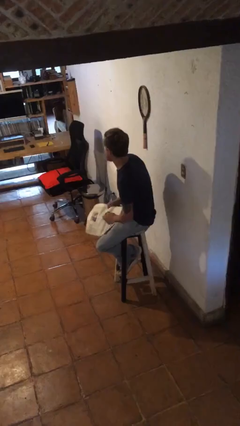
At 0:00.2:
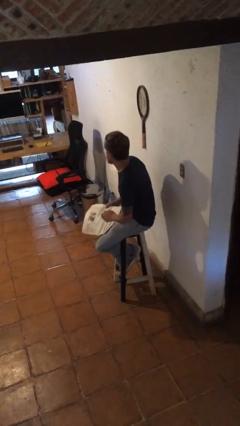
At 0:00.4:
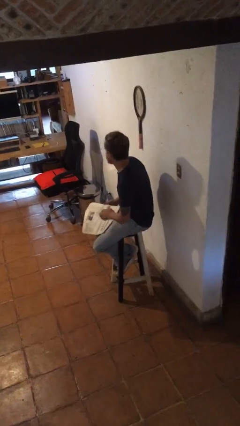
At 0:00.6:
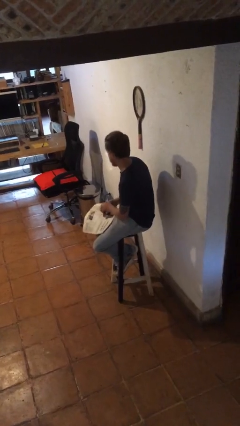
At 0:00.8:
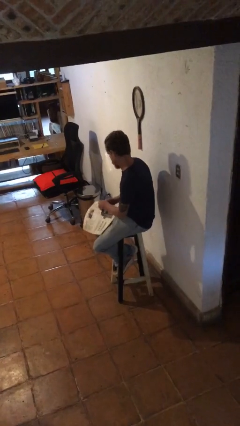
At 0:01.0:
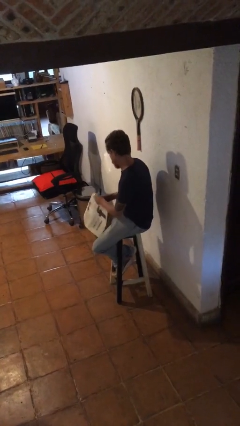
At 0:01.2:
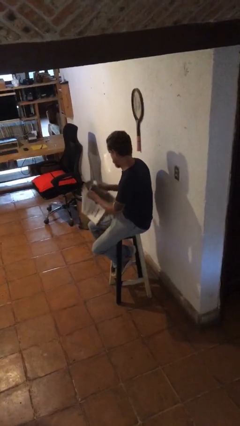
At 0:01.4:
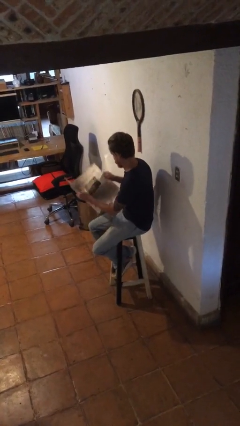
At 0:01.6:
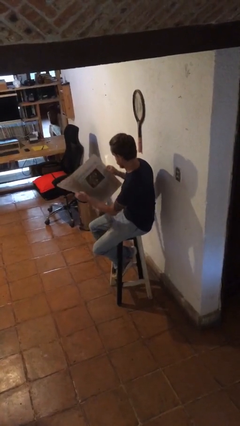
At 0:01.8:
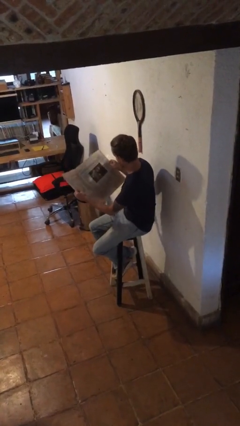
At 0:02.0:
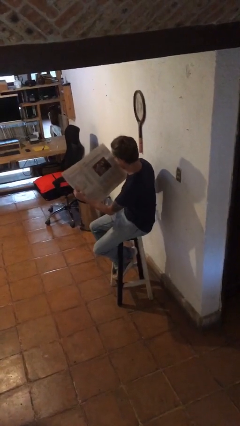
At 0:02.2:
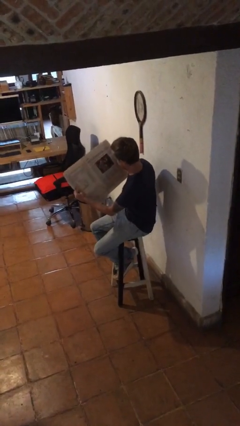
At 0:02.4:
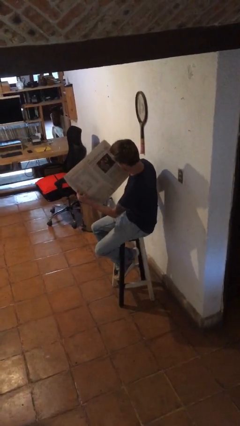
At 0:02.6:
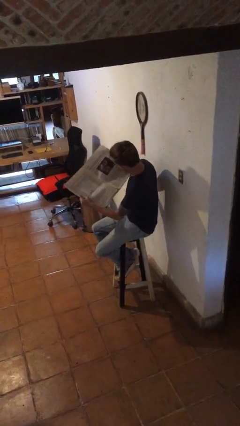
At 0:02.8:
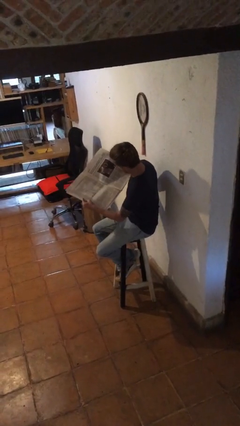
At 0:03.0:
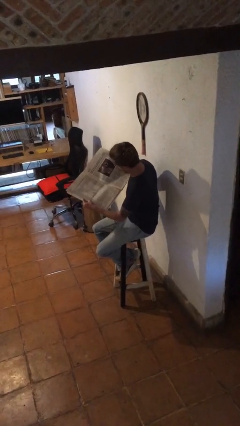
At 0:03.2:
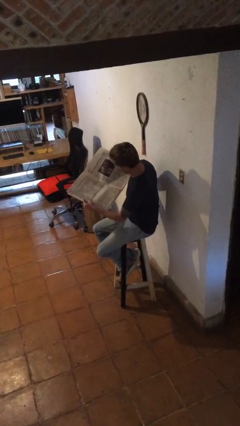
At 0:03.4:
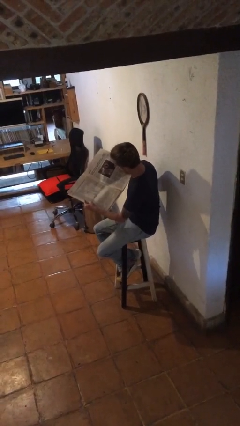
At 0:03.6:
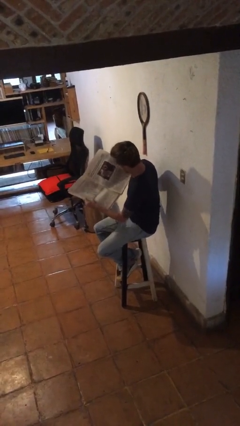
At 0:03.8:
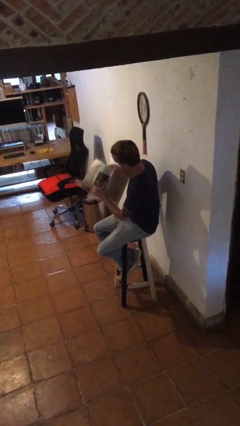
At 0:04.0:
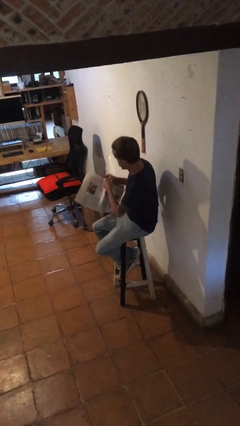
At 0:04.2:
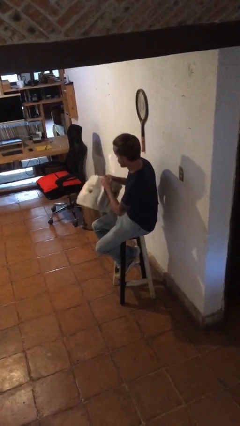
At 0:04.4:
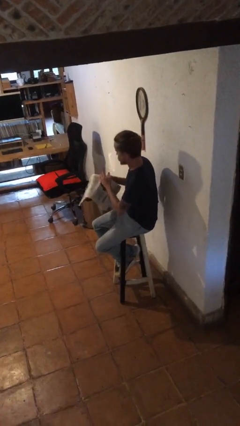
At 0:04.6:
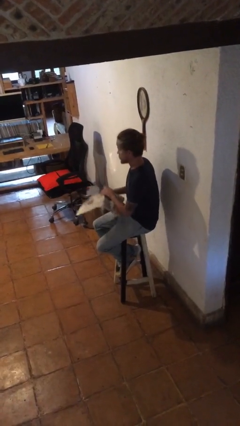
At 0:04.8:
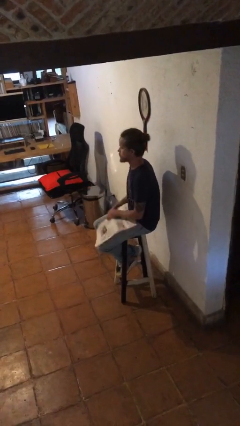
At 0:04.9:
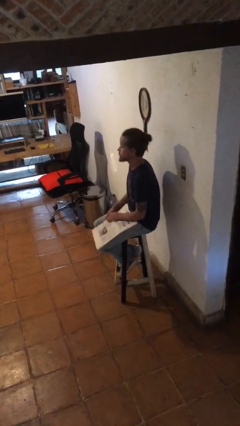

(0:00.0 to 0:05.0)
person reads newspaper

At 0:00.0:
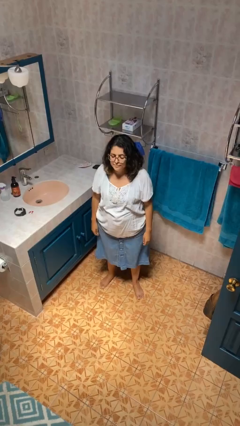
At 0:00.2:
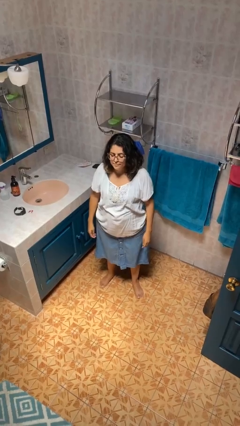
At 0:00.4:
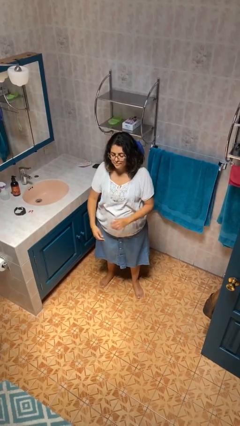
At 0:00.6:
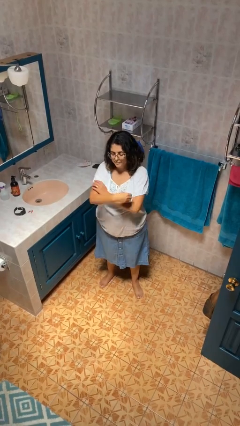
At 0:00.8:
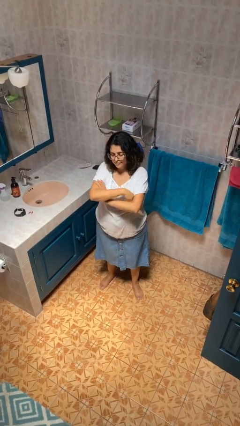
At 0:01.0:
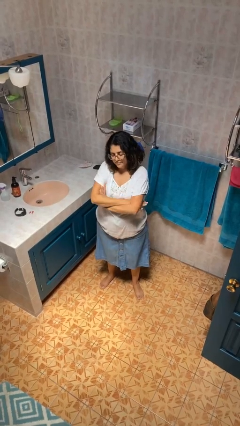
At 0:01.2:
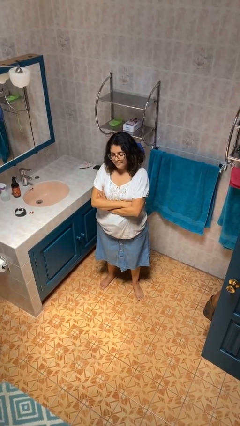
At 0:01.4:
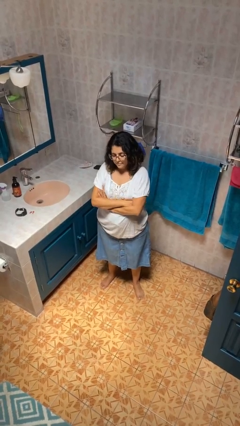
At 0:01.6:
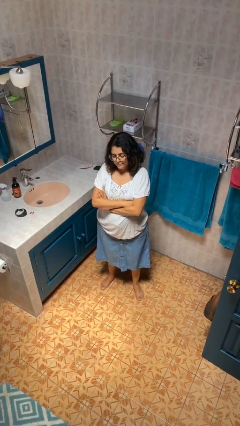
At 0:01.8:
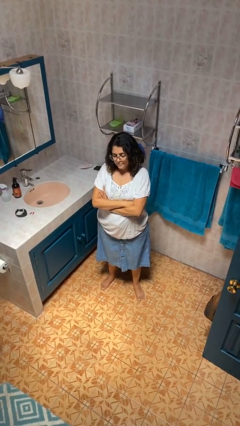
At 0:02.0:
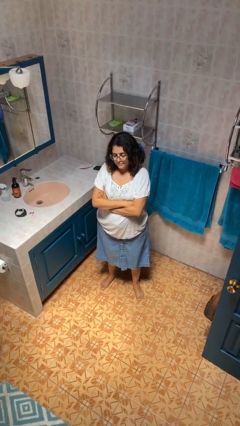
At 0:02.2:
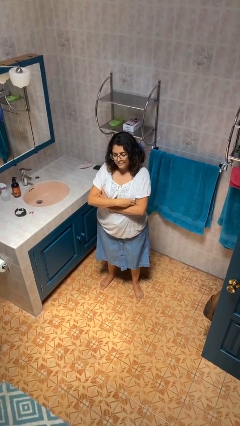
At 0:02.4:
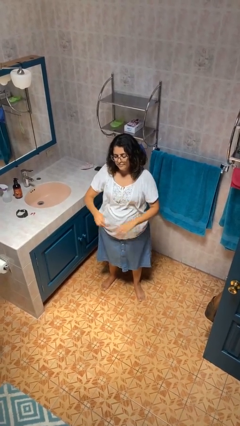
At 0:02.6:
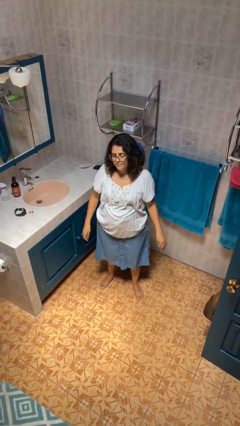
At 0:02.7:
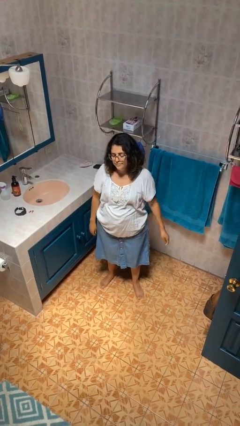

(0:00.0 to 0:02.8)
person crosses arms

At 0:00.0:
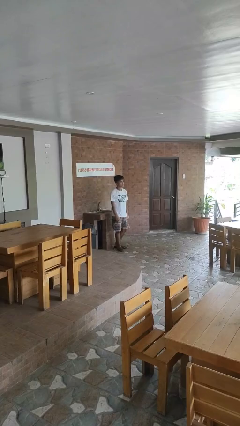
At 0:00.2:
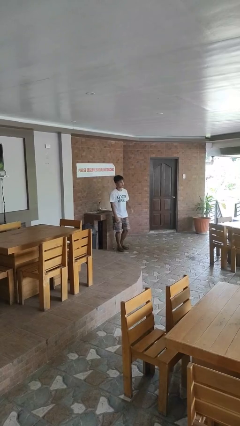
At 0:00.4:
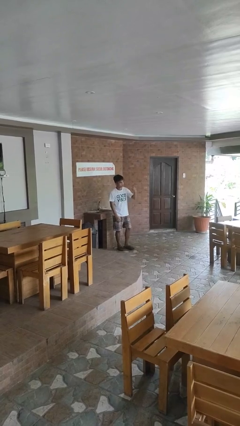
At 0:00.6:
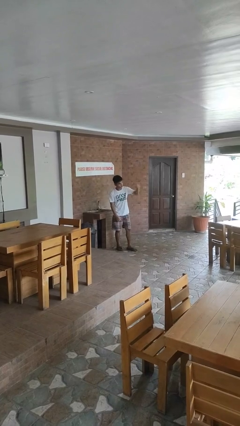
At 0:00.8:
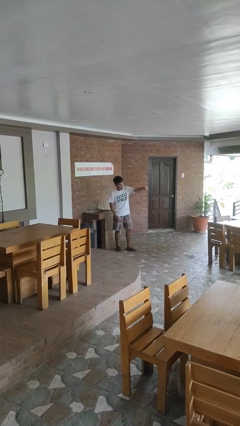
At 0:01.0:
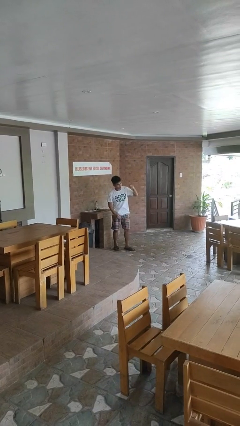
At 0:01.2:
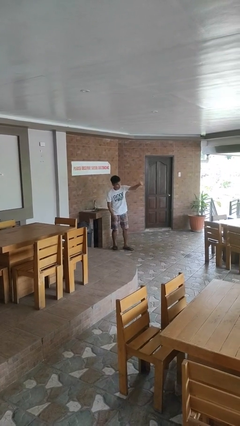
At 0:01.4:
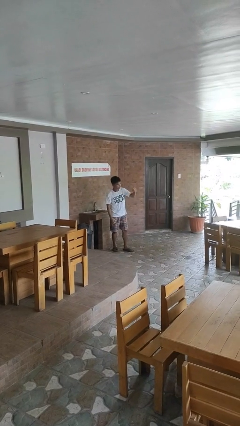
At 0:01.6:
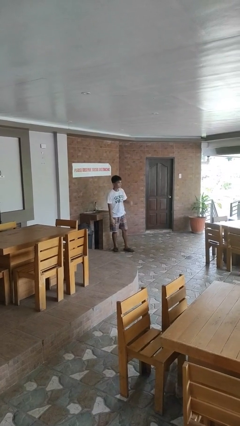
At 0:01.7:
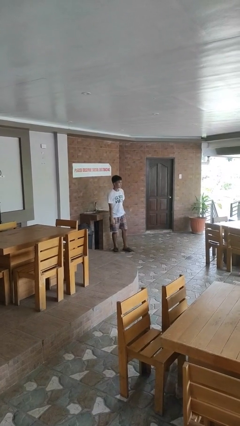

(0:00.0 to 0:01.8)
person punches

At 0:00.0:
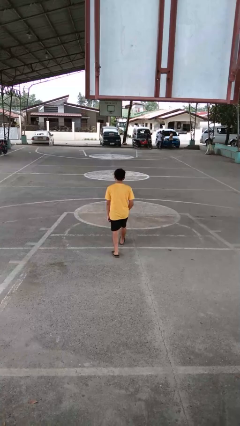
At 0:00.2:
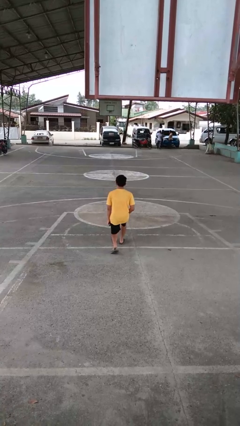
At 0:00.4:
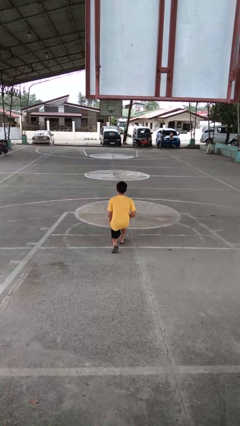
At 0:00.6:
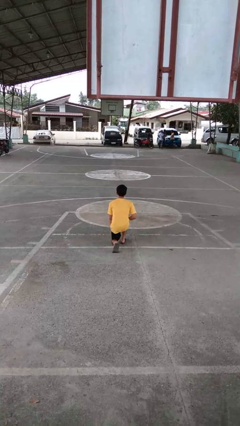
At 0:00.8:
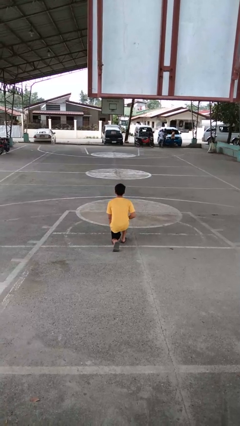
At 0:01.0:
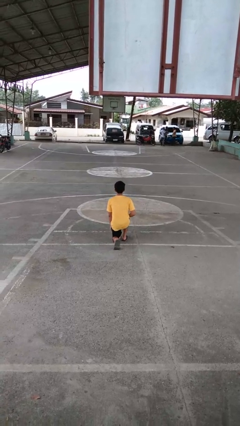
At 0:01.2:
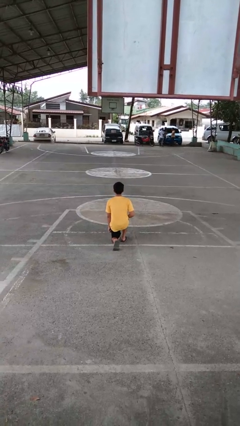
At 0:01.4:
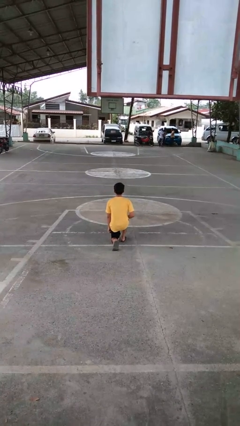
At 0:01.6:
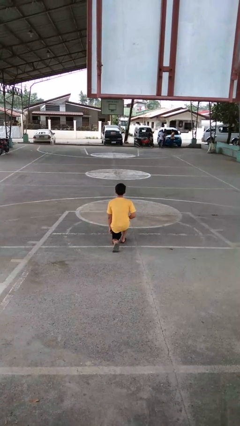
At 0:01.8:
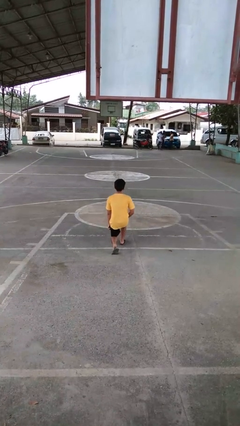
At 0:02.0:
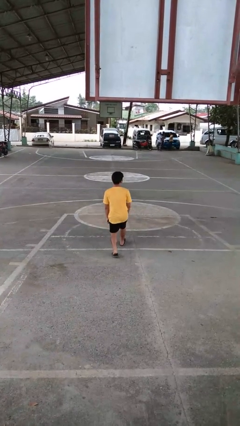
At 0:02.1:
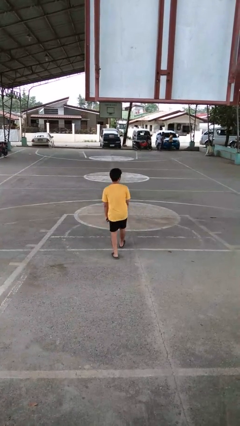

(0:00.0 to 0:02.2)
person kneels

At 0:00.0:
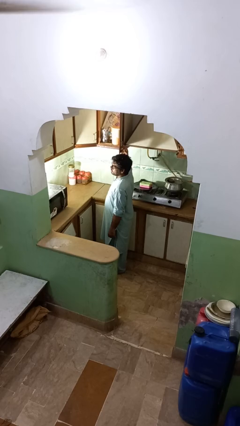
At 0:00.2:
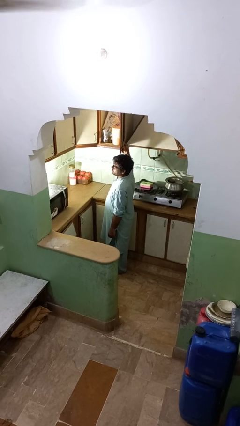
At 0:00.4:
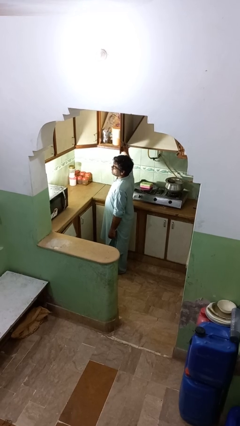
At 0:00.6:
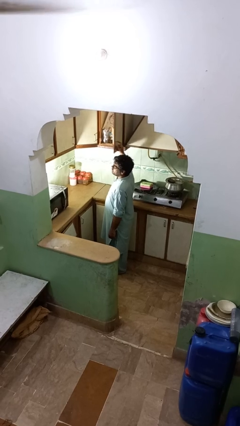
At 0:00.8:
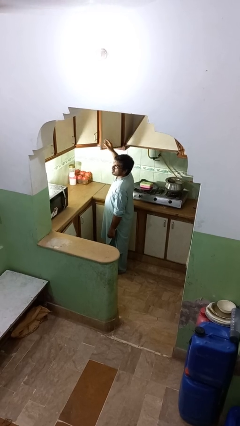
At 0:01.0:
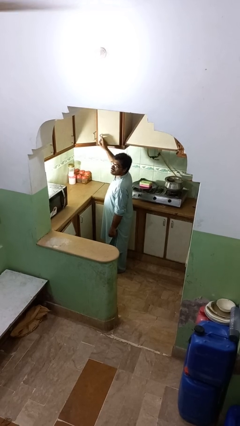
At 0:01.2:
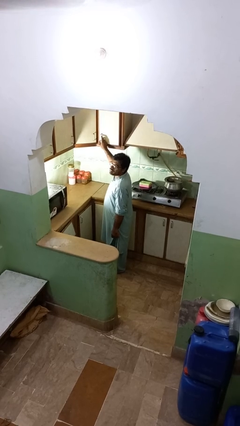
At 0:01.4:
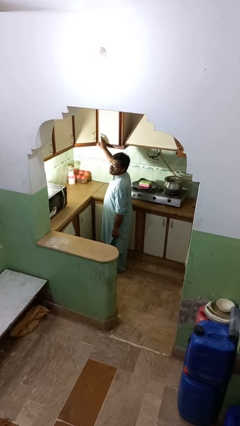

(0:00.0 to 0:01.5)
person closes kitchen drawer

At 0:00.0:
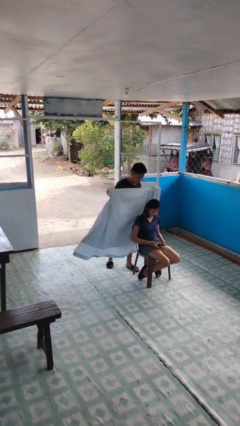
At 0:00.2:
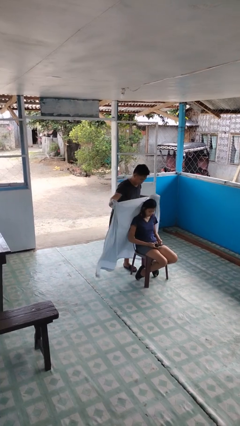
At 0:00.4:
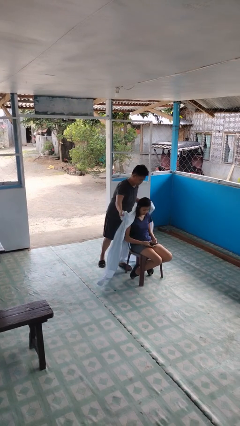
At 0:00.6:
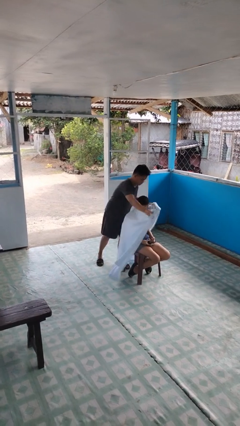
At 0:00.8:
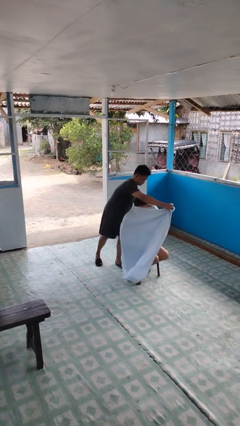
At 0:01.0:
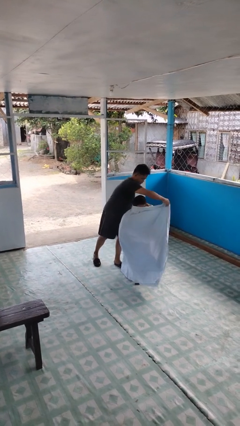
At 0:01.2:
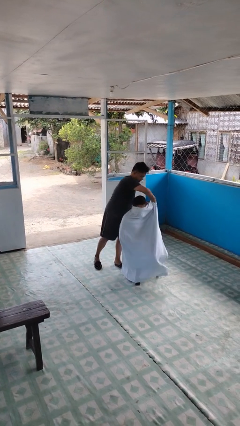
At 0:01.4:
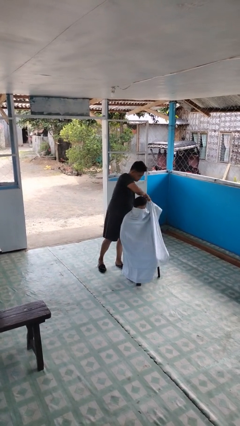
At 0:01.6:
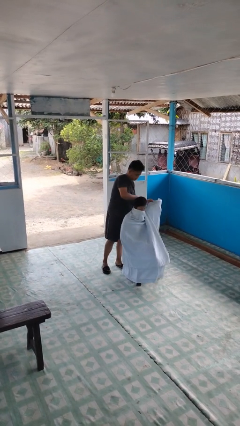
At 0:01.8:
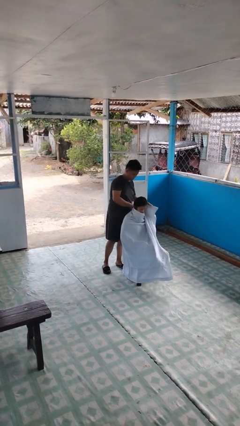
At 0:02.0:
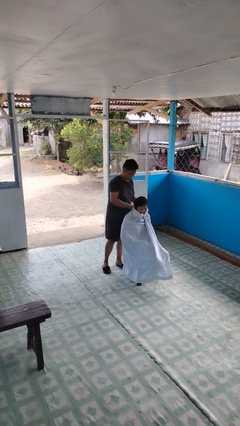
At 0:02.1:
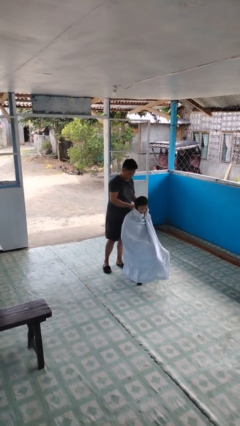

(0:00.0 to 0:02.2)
person covers friend with blanket

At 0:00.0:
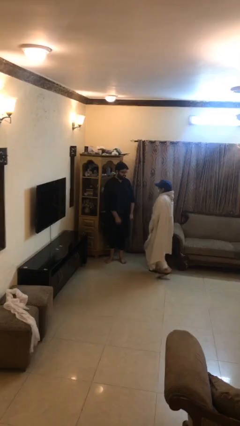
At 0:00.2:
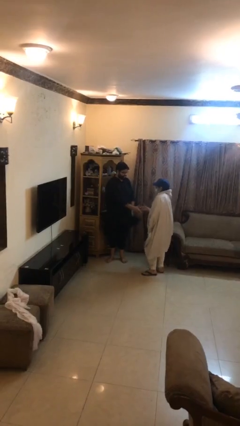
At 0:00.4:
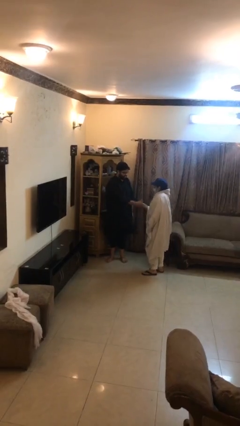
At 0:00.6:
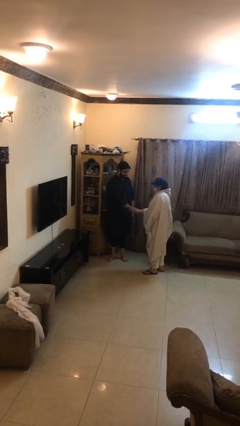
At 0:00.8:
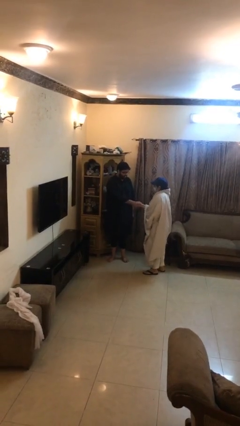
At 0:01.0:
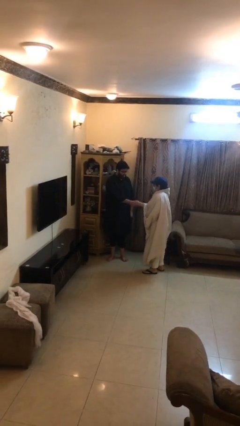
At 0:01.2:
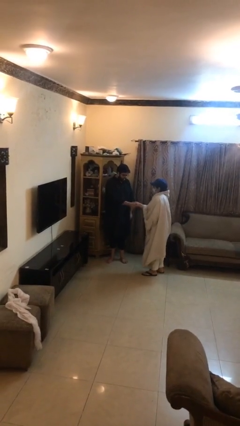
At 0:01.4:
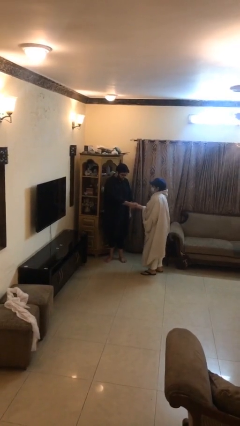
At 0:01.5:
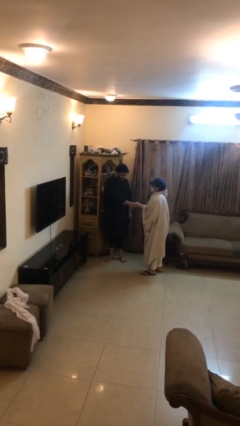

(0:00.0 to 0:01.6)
person shakes hand
